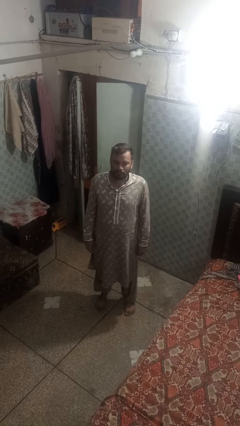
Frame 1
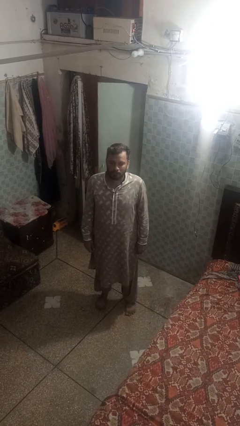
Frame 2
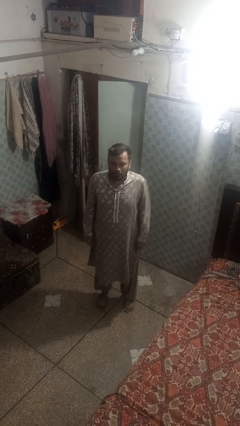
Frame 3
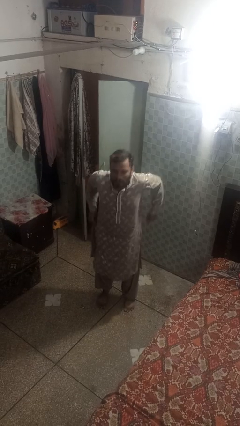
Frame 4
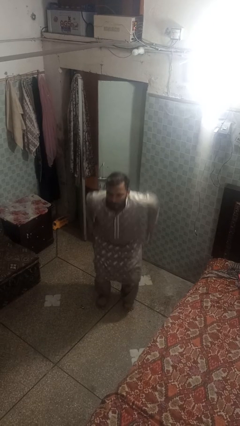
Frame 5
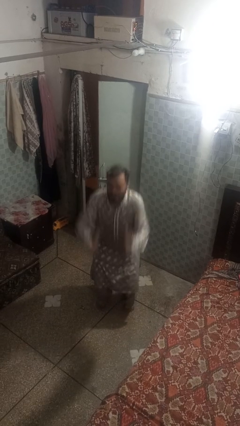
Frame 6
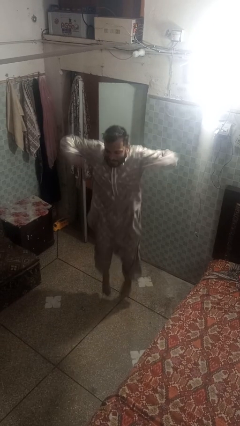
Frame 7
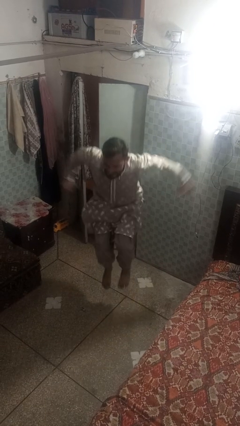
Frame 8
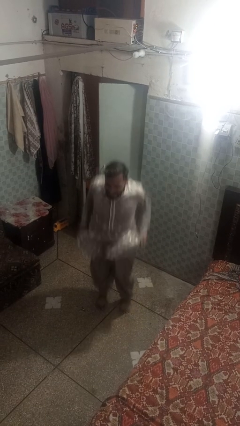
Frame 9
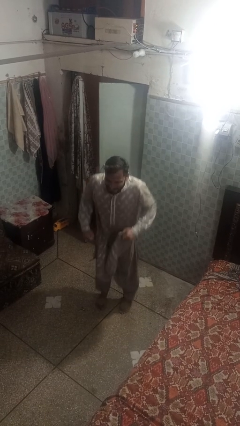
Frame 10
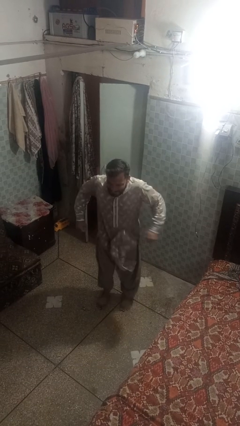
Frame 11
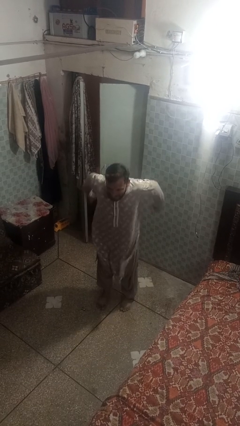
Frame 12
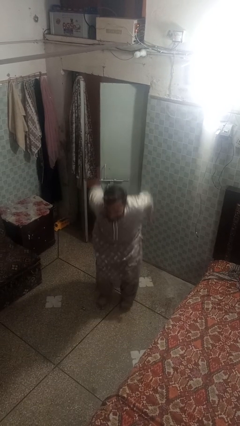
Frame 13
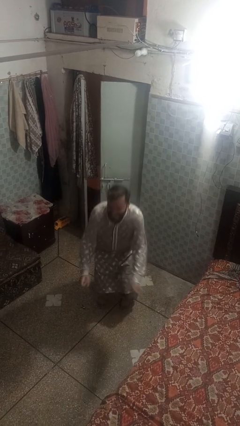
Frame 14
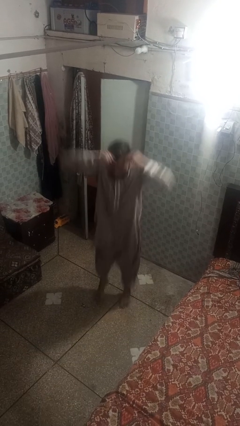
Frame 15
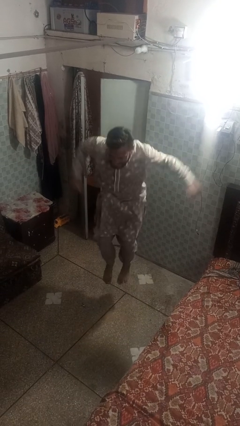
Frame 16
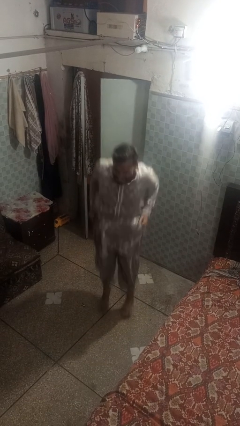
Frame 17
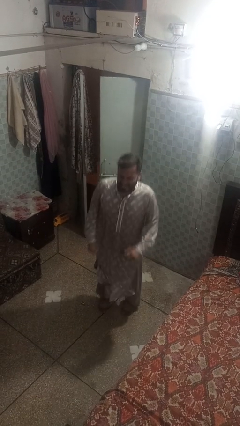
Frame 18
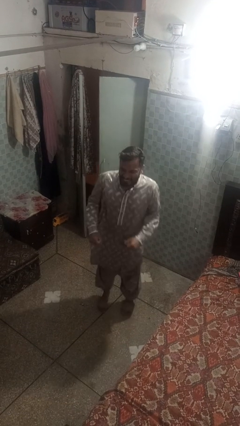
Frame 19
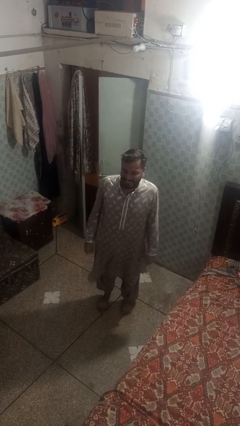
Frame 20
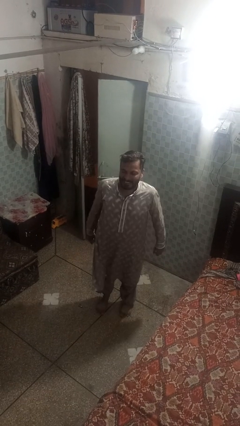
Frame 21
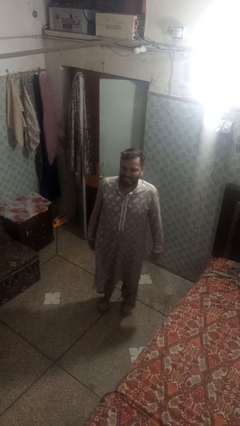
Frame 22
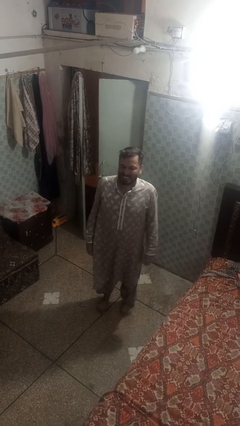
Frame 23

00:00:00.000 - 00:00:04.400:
person jumps

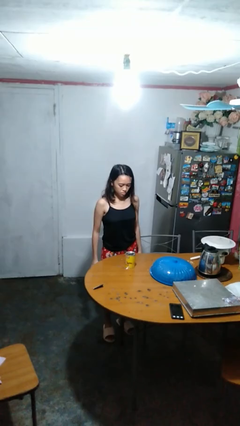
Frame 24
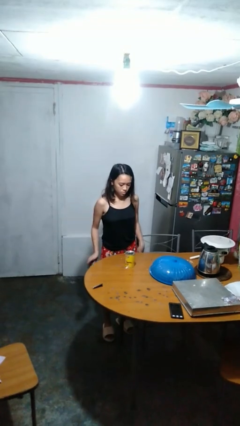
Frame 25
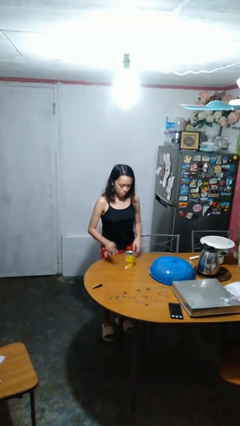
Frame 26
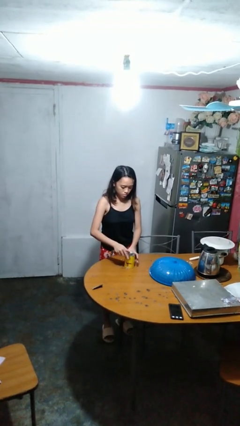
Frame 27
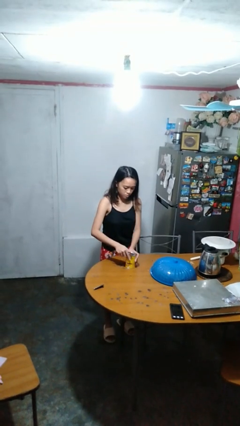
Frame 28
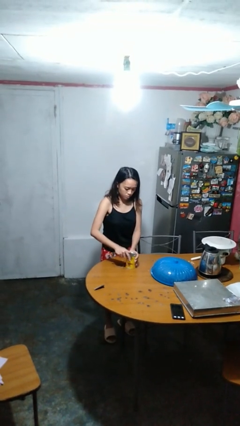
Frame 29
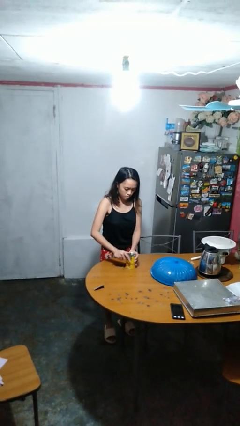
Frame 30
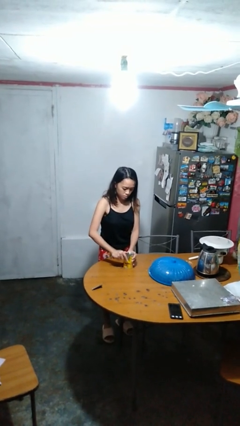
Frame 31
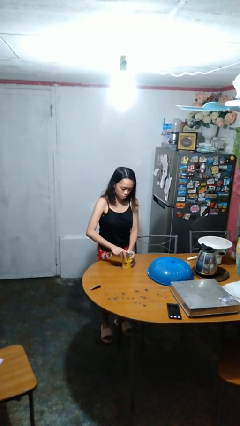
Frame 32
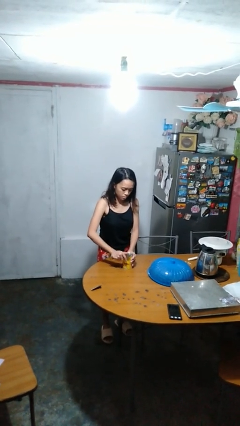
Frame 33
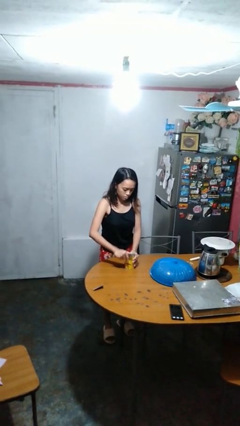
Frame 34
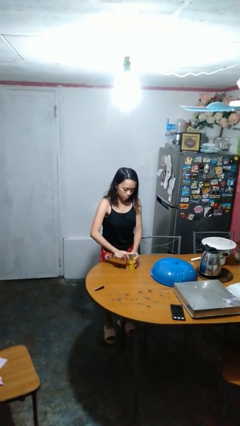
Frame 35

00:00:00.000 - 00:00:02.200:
person opens can with can opener

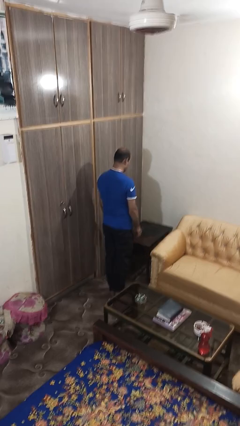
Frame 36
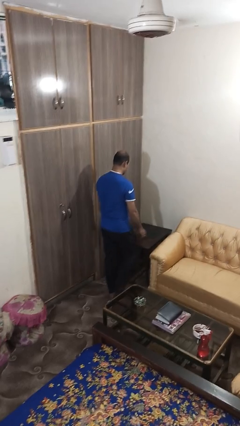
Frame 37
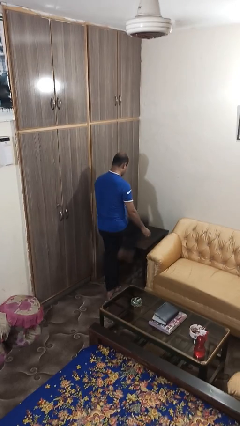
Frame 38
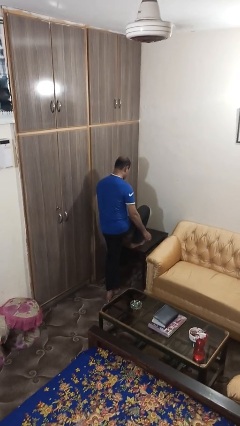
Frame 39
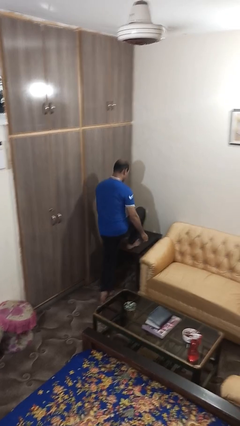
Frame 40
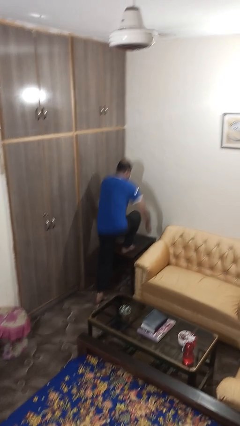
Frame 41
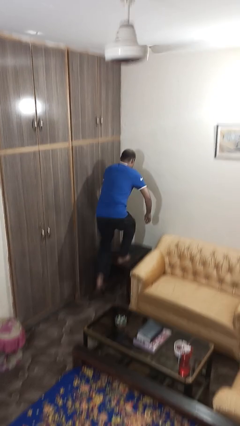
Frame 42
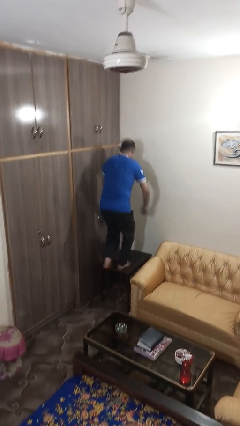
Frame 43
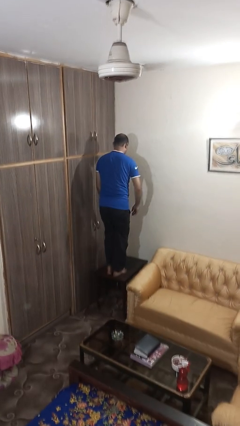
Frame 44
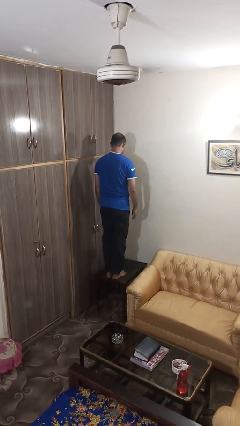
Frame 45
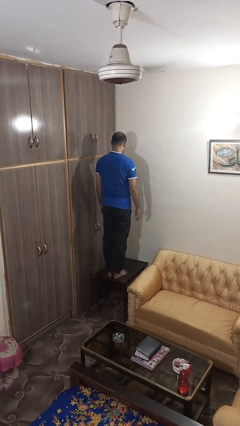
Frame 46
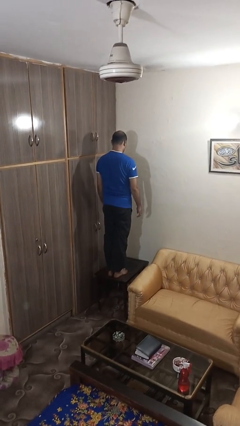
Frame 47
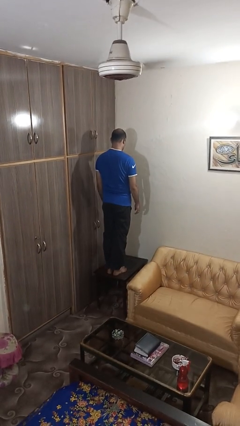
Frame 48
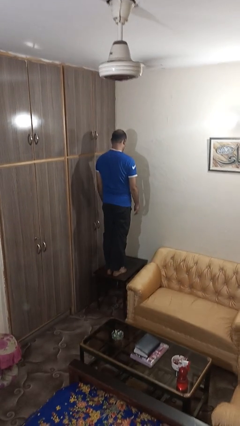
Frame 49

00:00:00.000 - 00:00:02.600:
person climbs on table

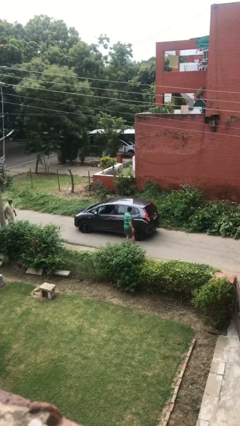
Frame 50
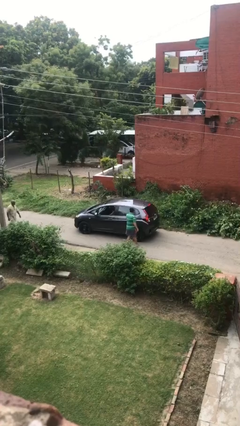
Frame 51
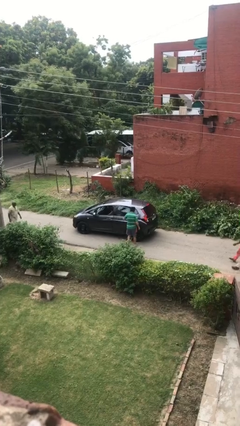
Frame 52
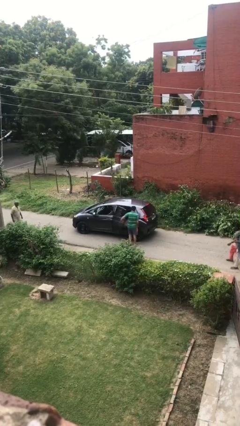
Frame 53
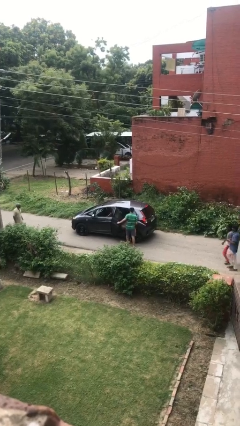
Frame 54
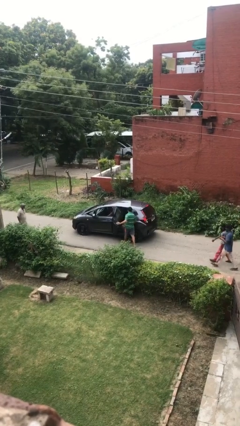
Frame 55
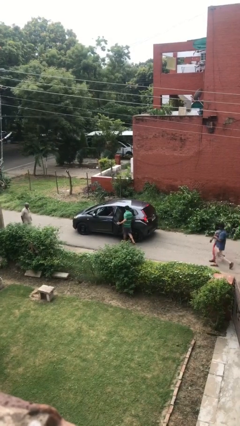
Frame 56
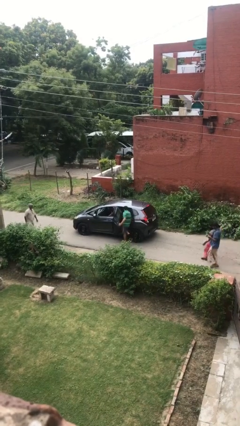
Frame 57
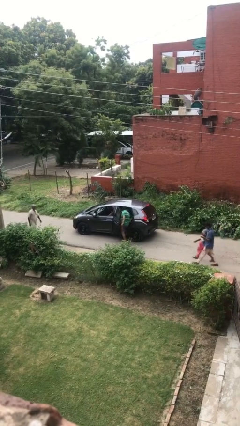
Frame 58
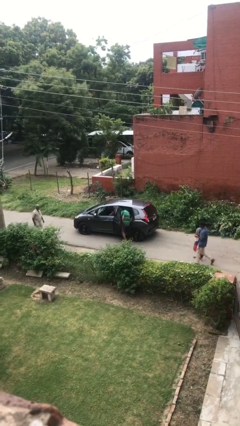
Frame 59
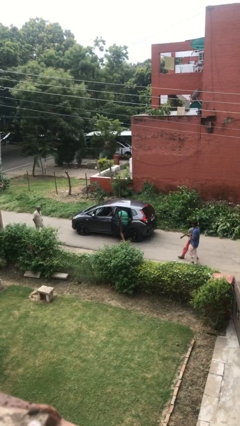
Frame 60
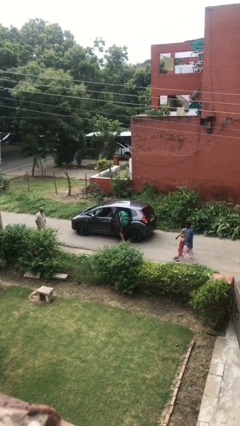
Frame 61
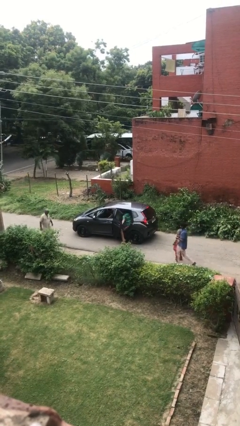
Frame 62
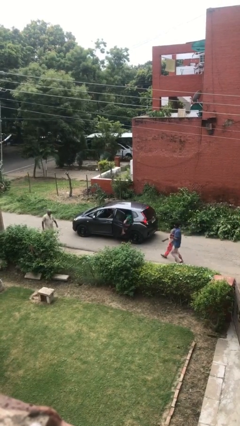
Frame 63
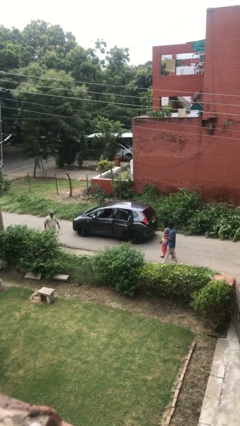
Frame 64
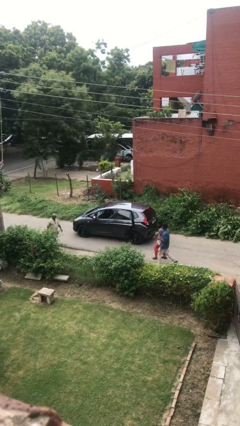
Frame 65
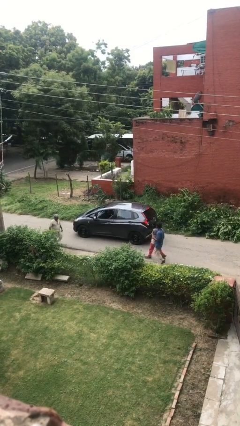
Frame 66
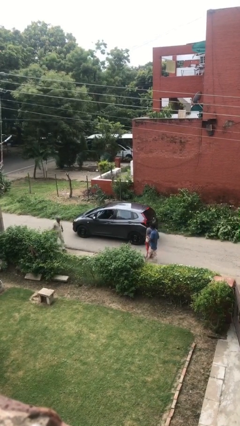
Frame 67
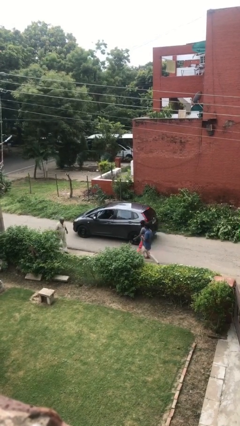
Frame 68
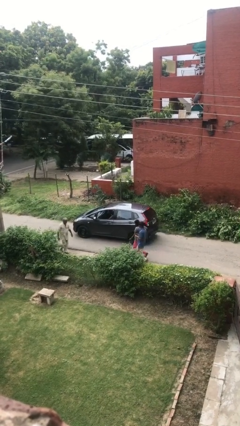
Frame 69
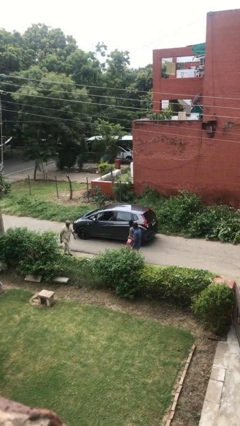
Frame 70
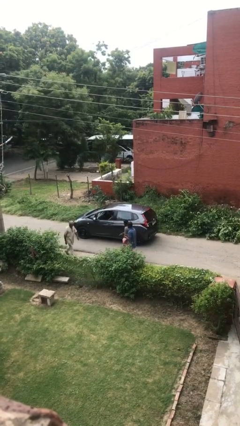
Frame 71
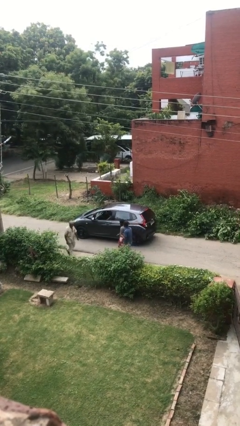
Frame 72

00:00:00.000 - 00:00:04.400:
car picks up person

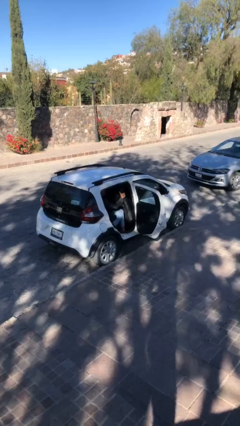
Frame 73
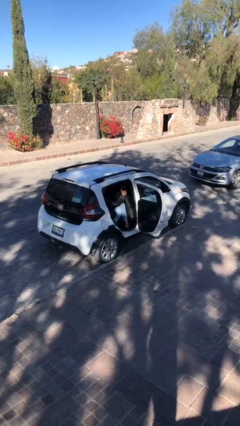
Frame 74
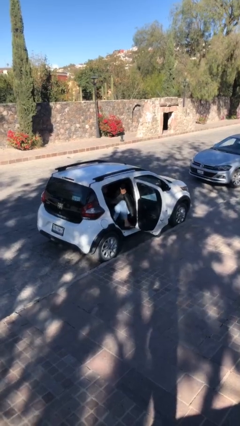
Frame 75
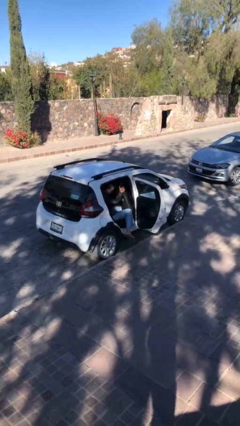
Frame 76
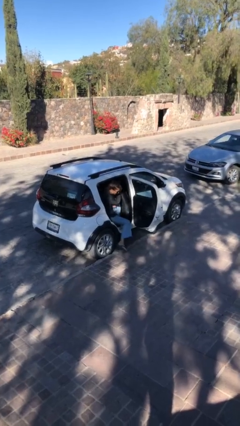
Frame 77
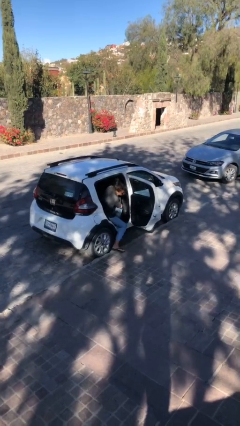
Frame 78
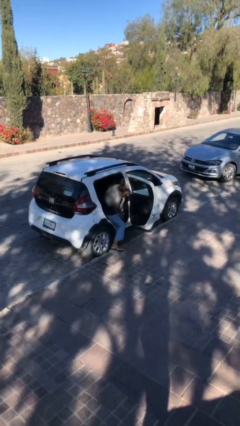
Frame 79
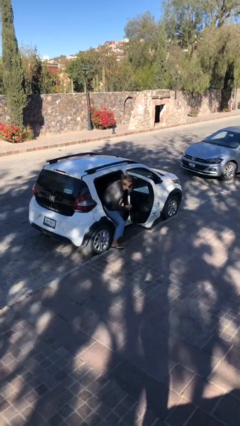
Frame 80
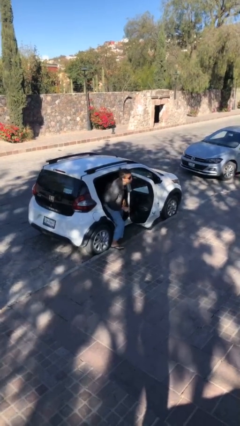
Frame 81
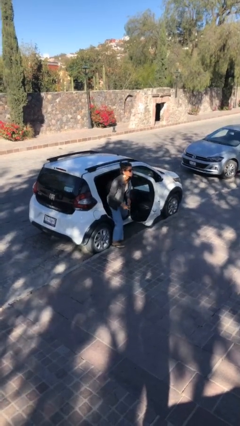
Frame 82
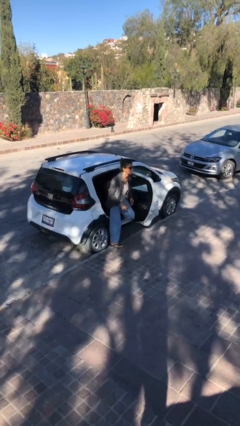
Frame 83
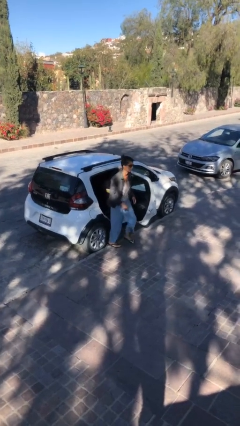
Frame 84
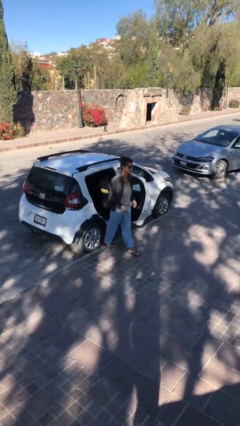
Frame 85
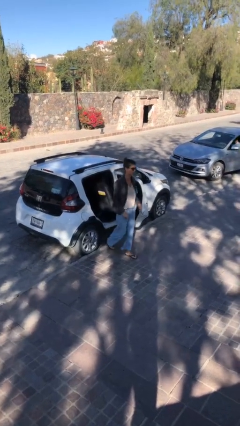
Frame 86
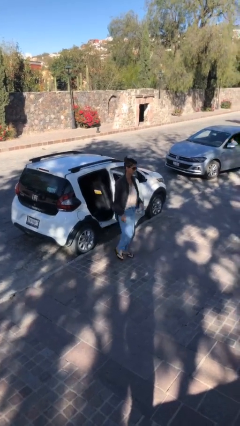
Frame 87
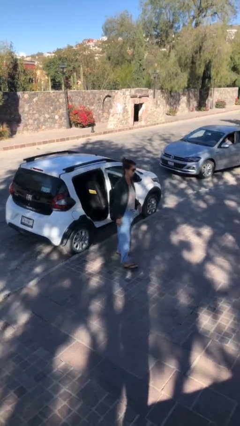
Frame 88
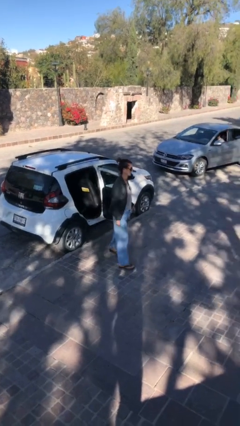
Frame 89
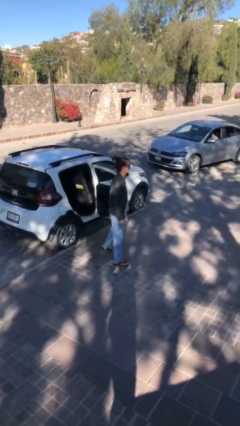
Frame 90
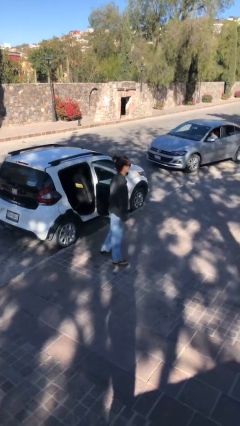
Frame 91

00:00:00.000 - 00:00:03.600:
person exits car

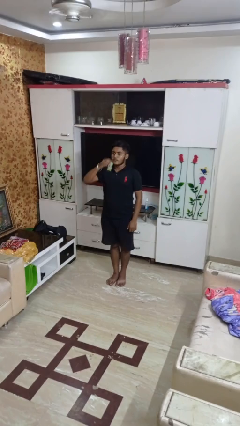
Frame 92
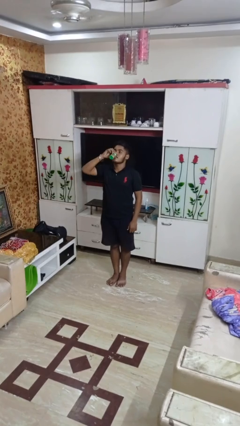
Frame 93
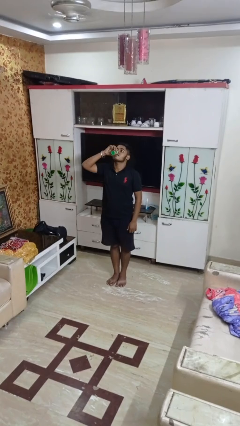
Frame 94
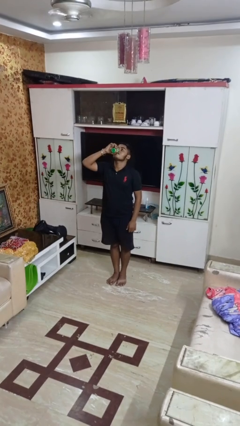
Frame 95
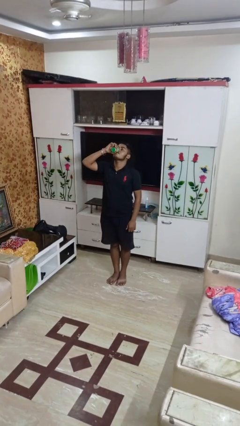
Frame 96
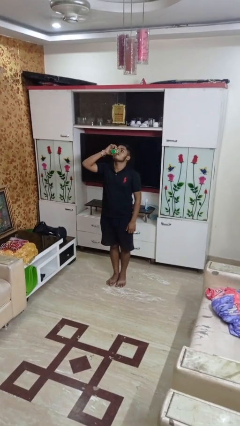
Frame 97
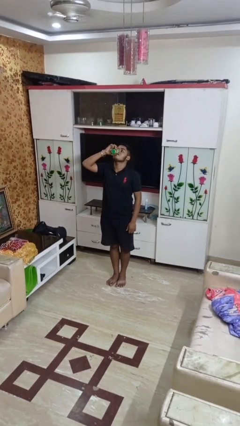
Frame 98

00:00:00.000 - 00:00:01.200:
person drinks from beverage can
